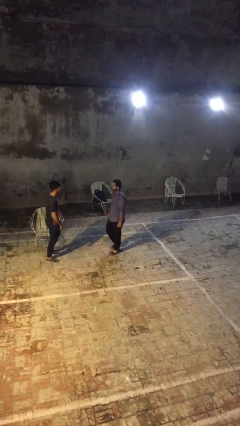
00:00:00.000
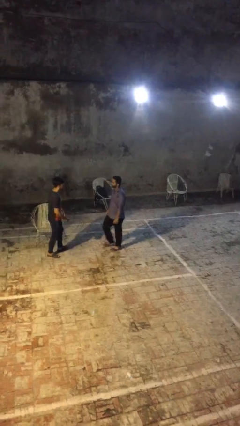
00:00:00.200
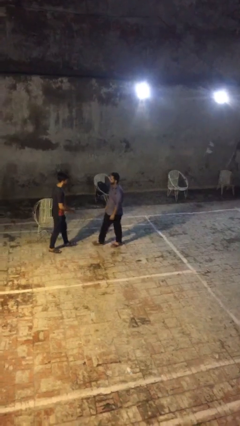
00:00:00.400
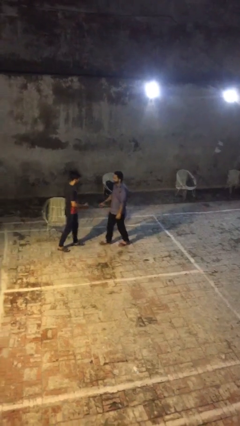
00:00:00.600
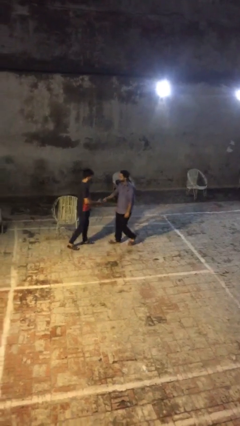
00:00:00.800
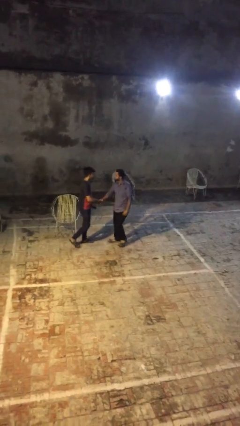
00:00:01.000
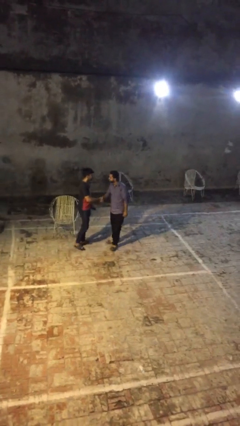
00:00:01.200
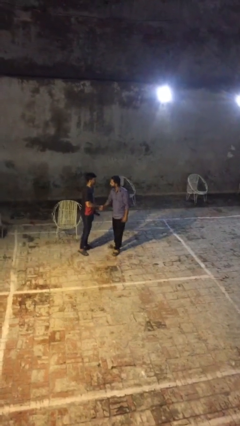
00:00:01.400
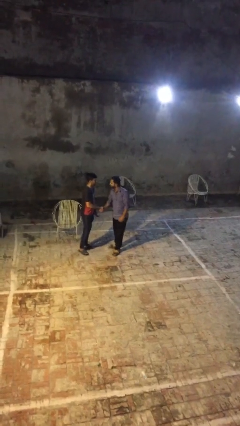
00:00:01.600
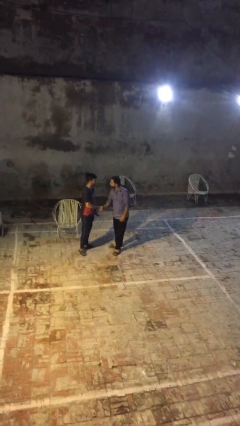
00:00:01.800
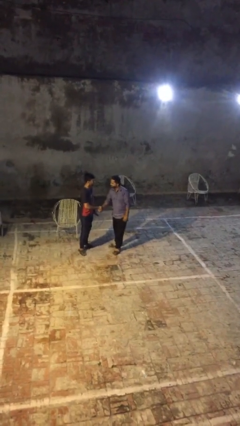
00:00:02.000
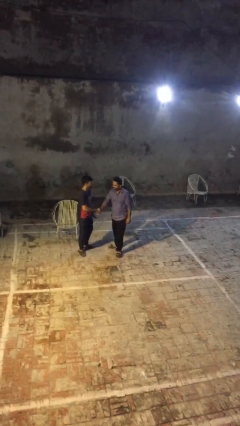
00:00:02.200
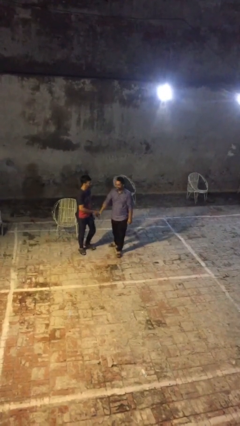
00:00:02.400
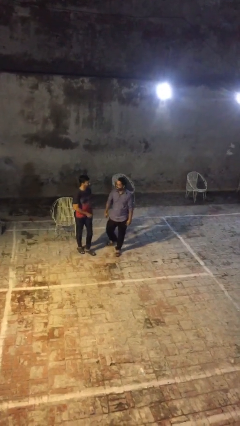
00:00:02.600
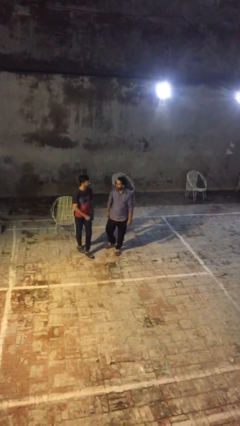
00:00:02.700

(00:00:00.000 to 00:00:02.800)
person shakes hand

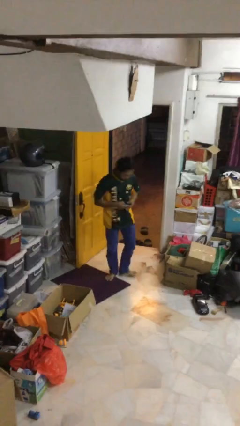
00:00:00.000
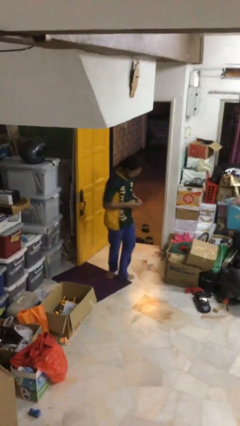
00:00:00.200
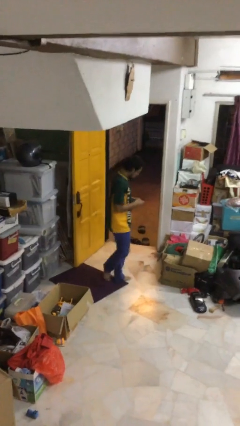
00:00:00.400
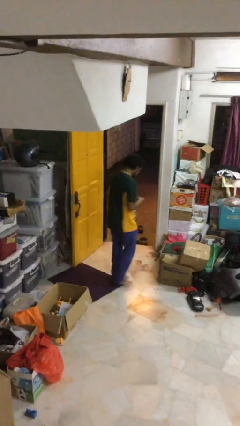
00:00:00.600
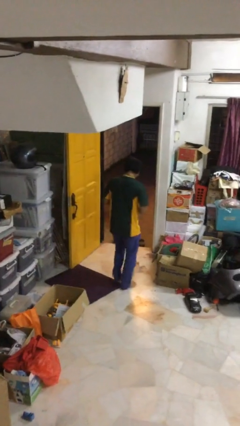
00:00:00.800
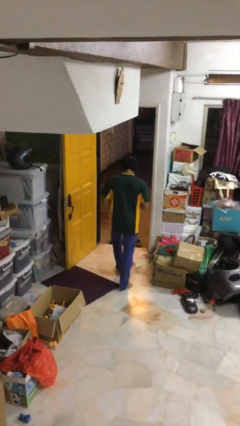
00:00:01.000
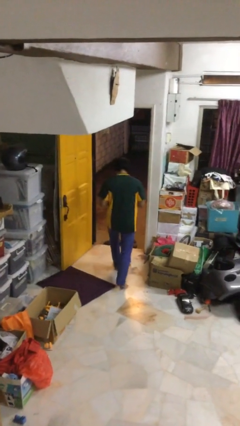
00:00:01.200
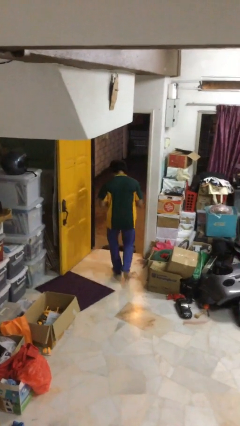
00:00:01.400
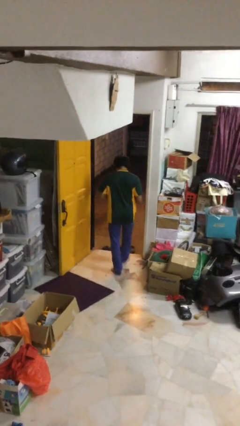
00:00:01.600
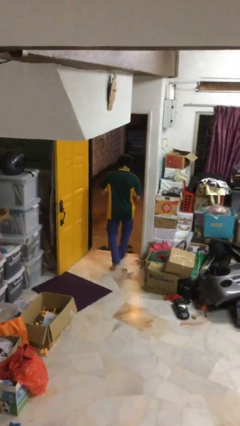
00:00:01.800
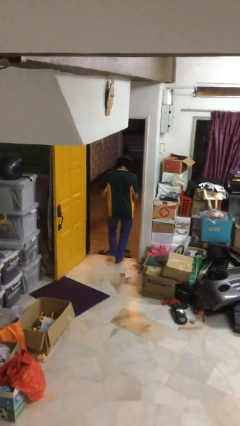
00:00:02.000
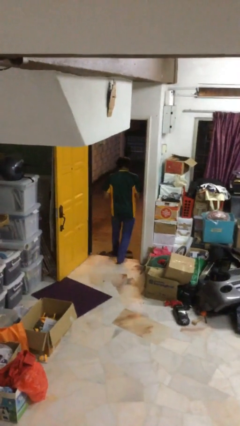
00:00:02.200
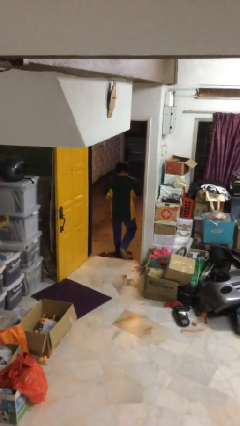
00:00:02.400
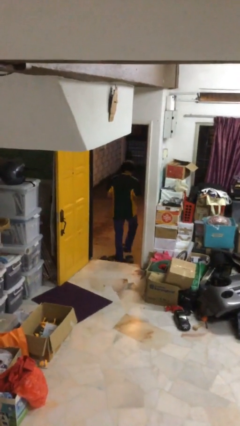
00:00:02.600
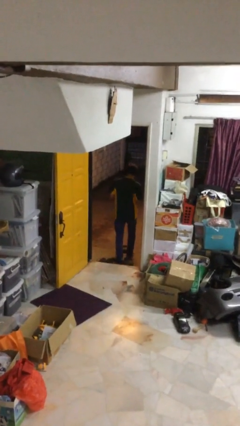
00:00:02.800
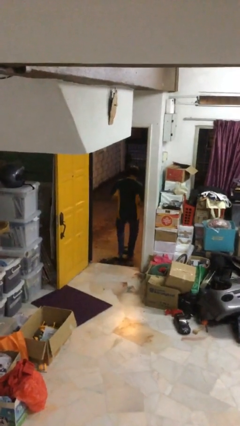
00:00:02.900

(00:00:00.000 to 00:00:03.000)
person exits scene through structure

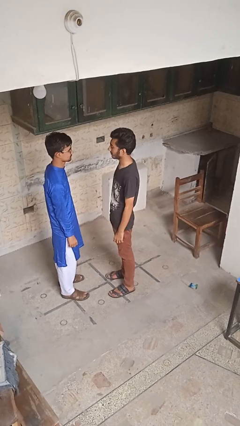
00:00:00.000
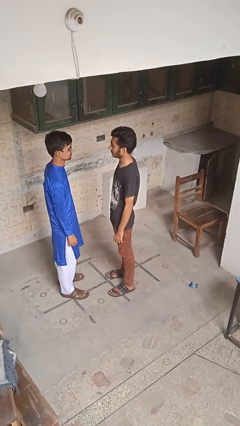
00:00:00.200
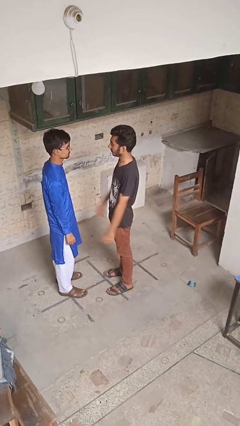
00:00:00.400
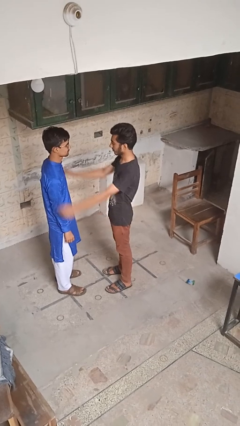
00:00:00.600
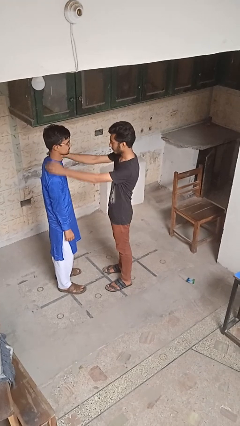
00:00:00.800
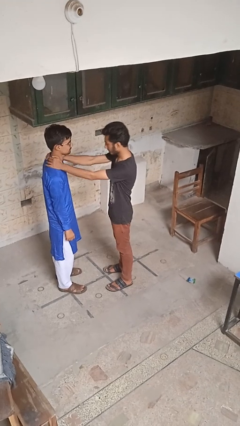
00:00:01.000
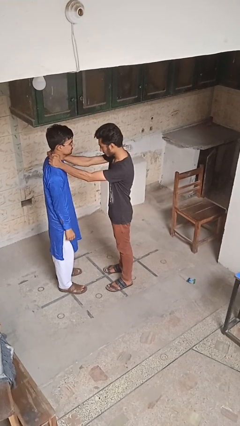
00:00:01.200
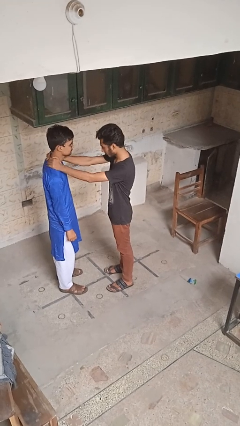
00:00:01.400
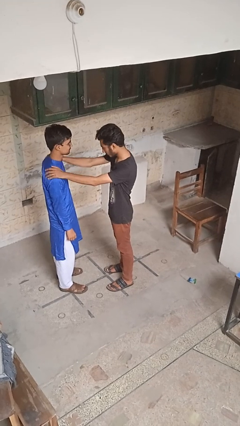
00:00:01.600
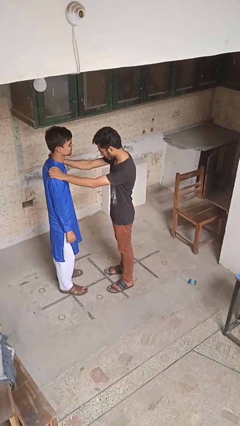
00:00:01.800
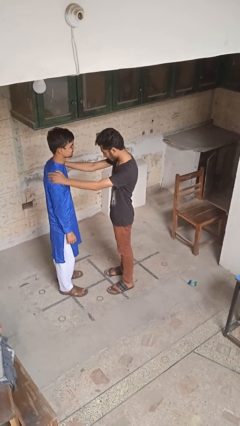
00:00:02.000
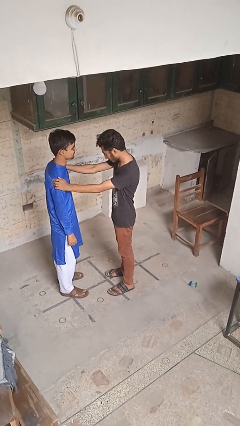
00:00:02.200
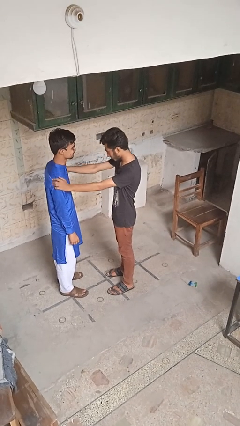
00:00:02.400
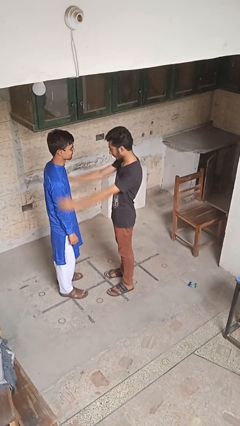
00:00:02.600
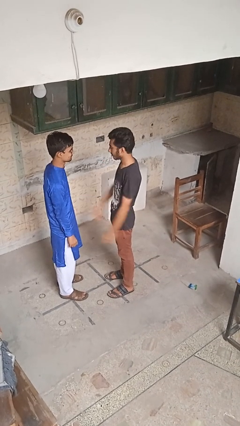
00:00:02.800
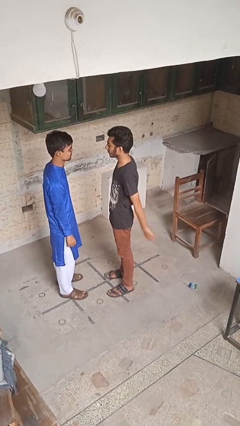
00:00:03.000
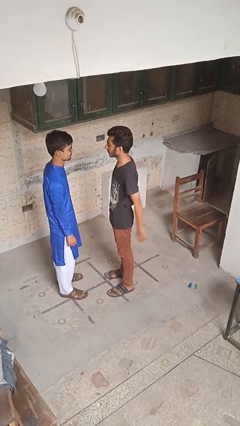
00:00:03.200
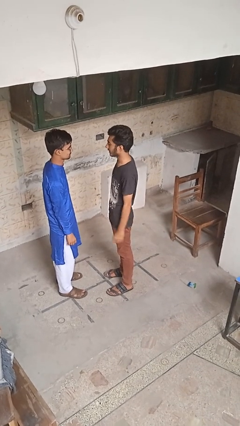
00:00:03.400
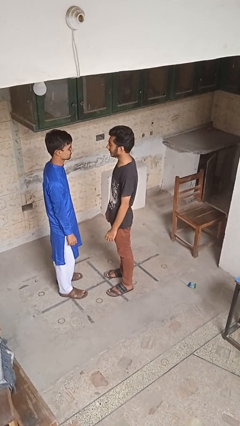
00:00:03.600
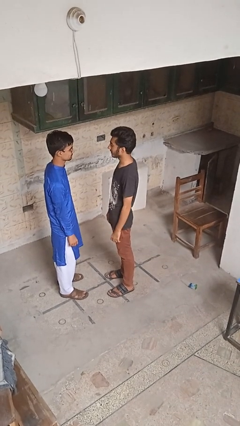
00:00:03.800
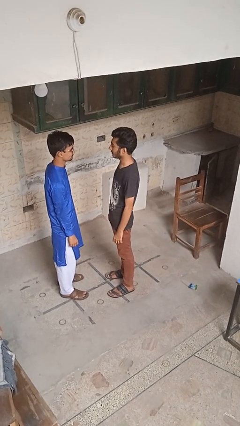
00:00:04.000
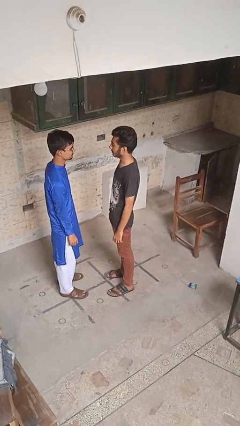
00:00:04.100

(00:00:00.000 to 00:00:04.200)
person pounds shoulders of person

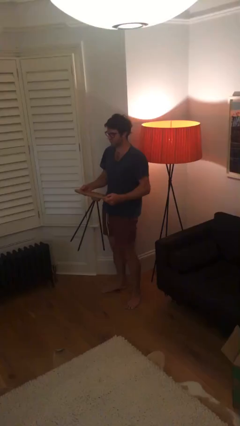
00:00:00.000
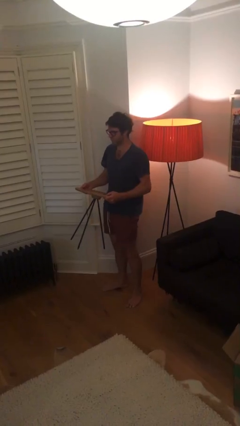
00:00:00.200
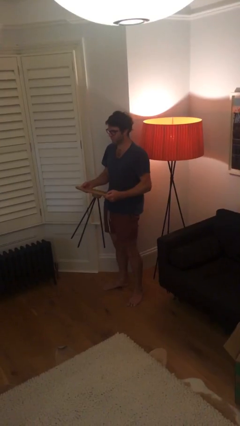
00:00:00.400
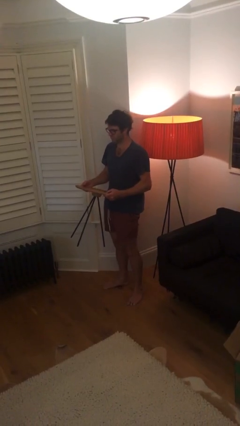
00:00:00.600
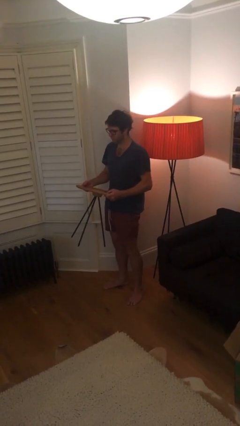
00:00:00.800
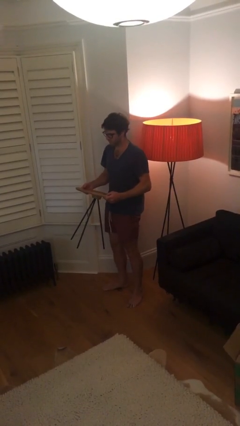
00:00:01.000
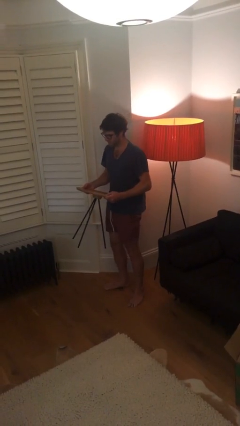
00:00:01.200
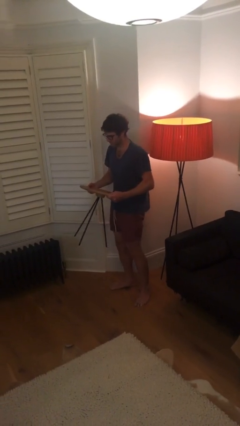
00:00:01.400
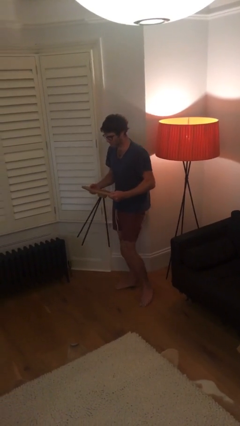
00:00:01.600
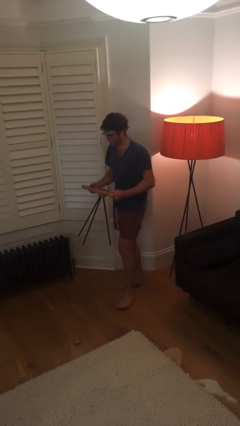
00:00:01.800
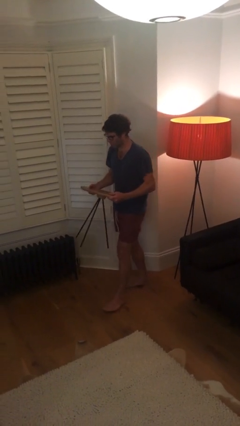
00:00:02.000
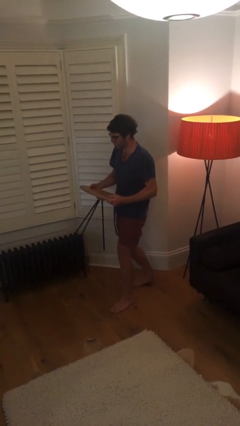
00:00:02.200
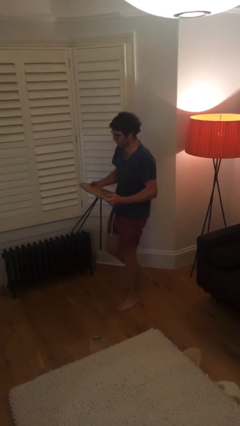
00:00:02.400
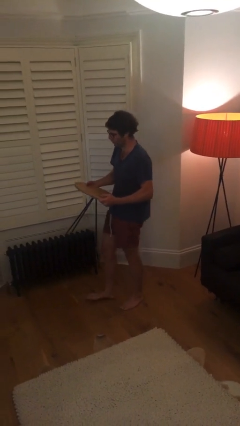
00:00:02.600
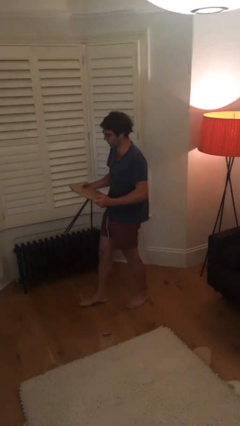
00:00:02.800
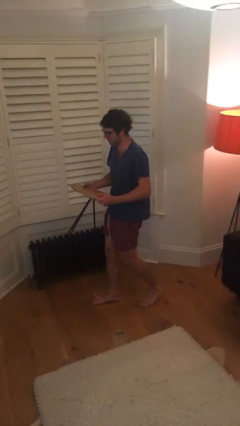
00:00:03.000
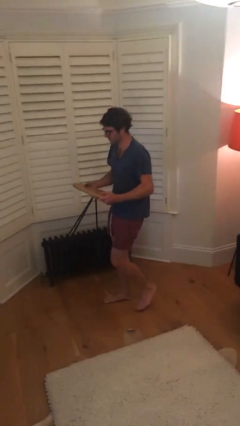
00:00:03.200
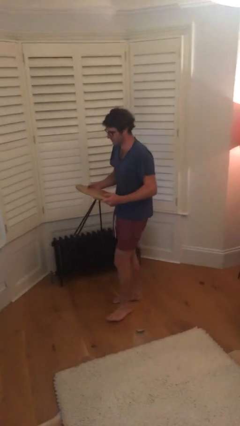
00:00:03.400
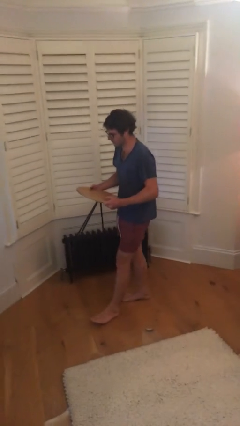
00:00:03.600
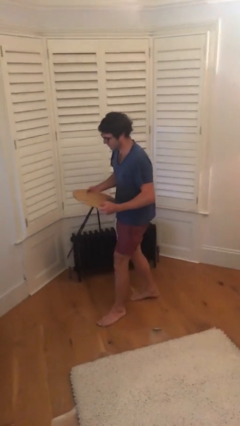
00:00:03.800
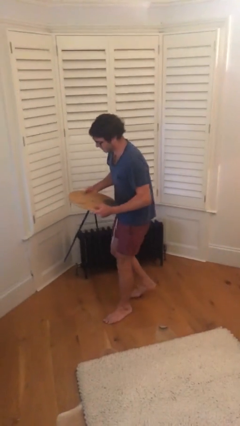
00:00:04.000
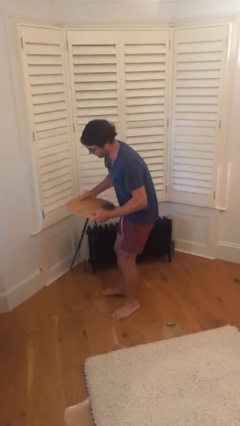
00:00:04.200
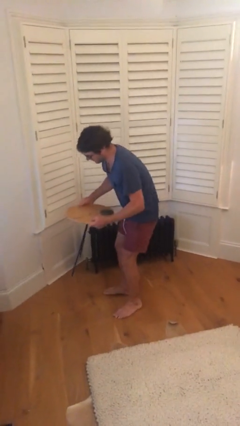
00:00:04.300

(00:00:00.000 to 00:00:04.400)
person carries heavy object

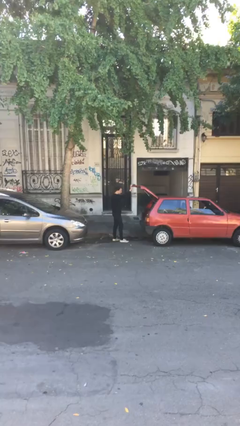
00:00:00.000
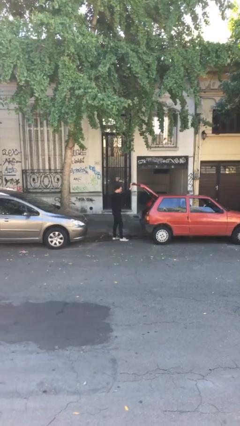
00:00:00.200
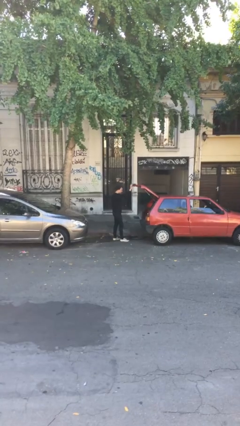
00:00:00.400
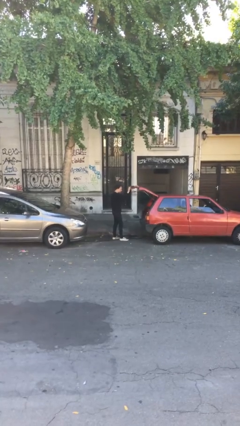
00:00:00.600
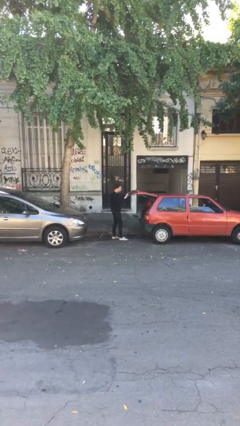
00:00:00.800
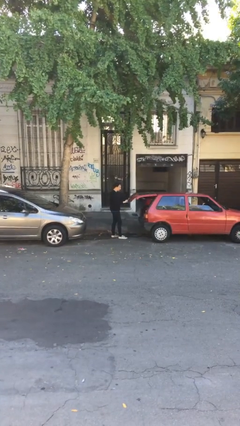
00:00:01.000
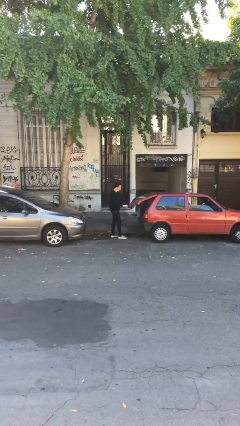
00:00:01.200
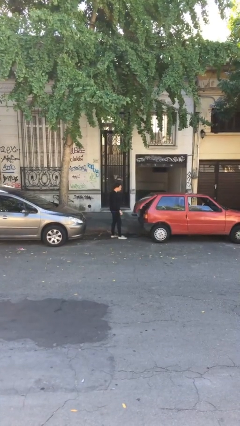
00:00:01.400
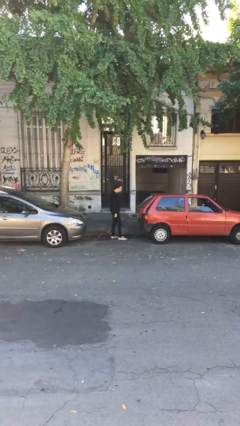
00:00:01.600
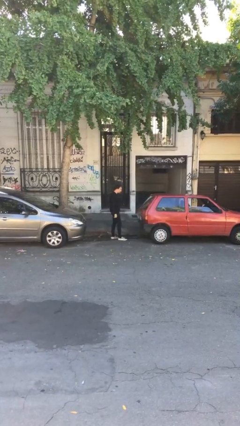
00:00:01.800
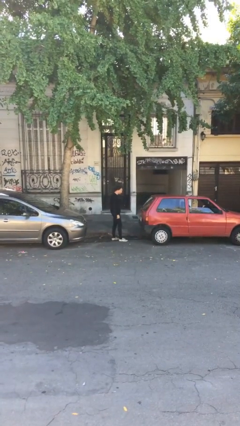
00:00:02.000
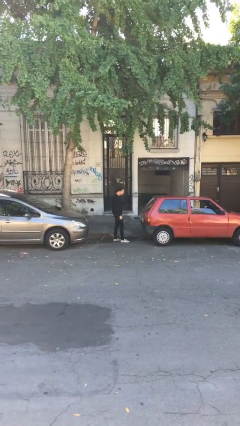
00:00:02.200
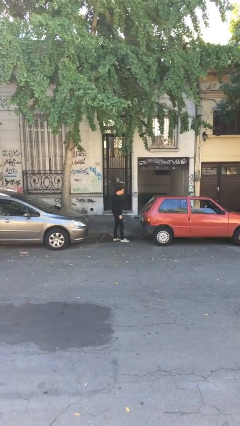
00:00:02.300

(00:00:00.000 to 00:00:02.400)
person closes car trunk

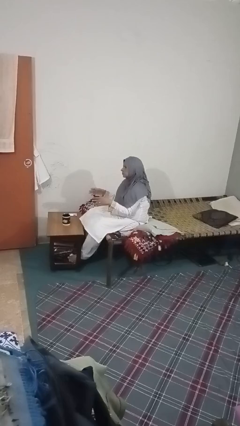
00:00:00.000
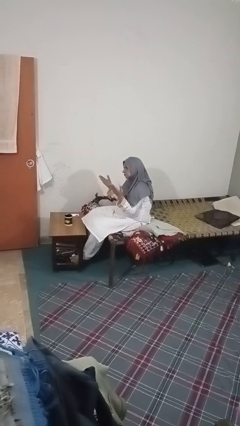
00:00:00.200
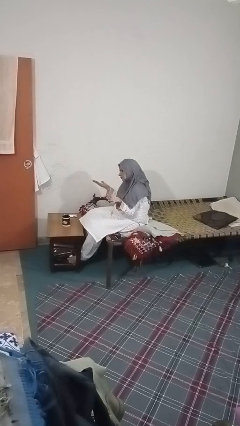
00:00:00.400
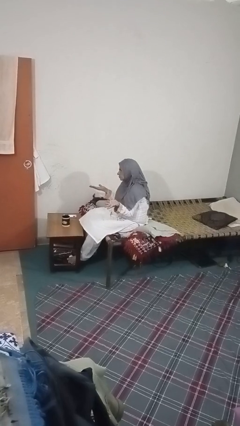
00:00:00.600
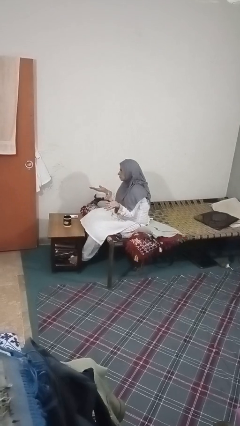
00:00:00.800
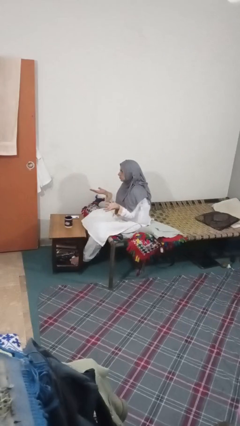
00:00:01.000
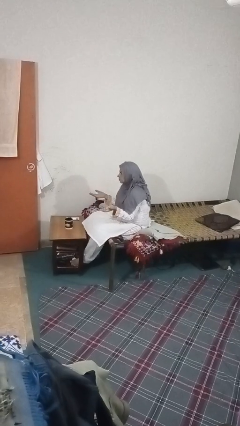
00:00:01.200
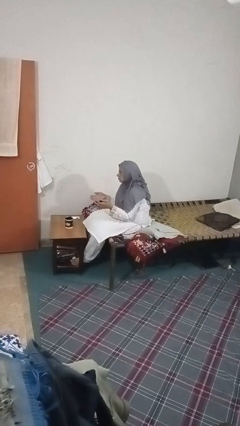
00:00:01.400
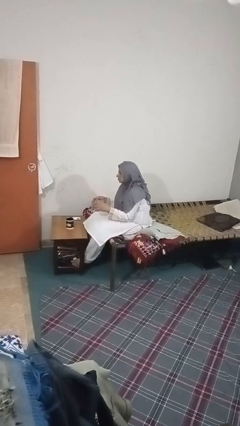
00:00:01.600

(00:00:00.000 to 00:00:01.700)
person shrugs